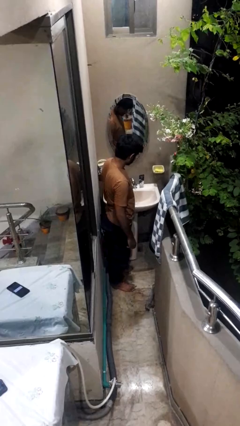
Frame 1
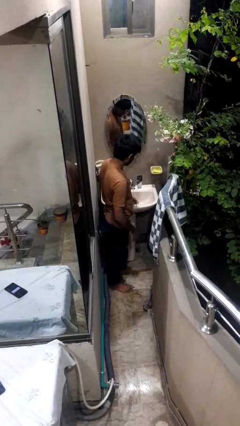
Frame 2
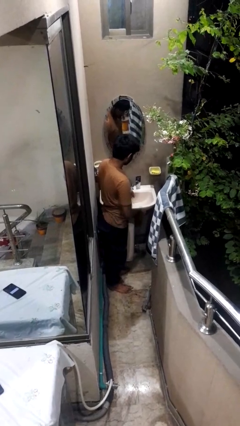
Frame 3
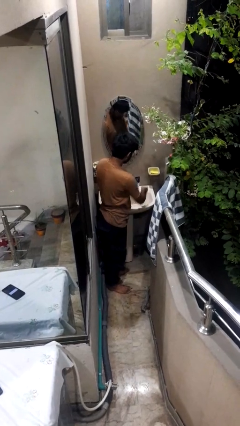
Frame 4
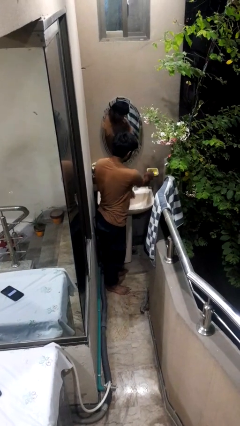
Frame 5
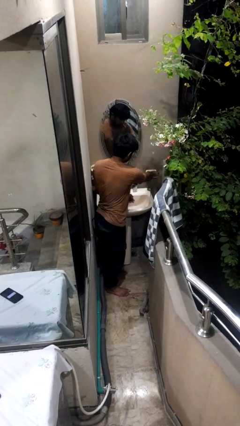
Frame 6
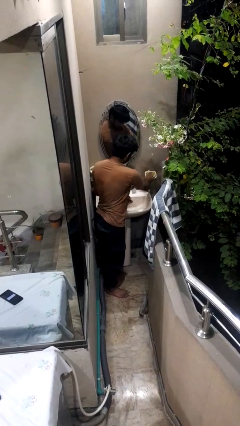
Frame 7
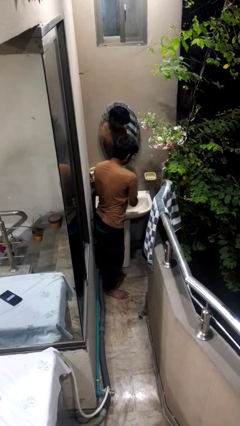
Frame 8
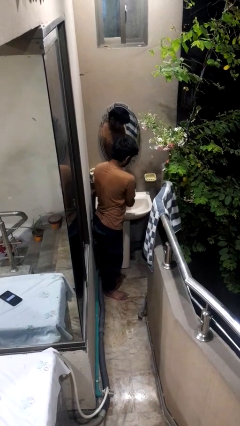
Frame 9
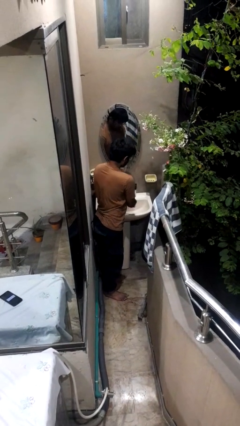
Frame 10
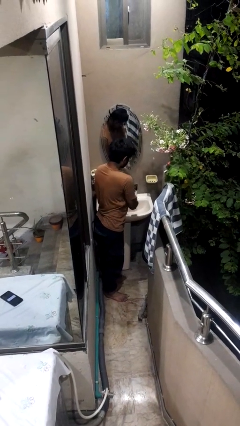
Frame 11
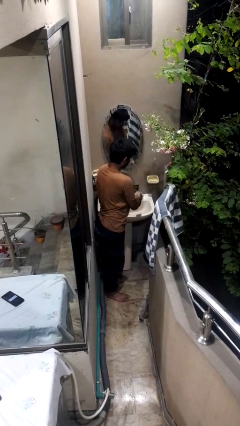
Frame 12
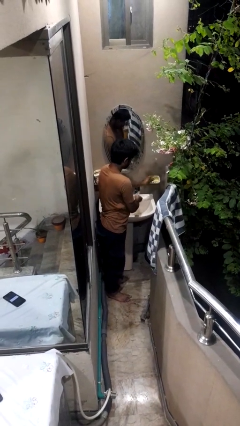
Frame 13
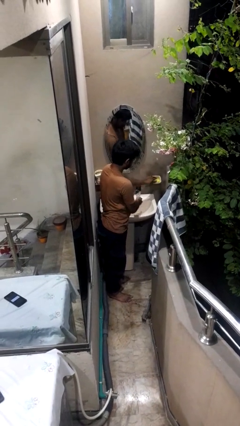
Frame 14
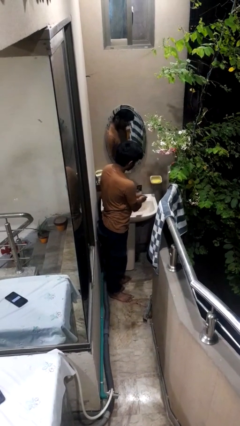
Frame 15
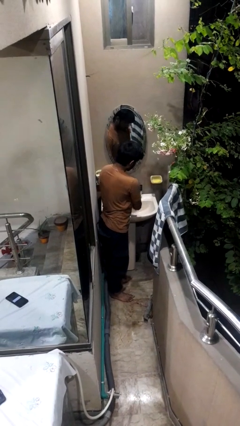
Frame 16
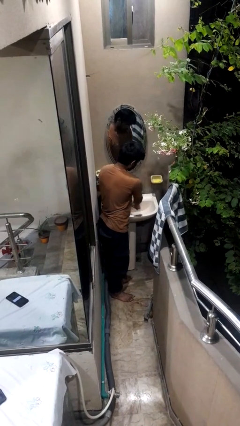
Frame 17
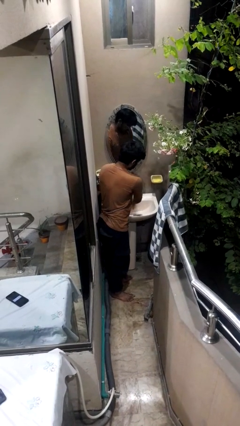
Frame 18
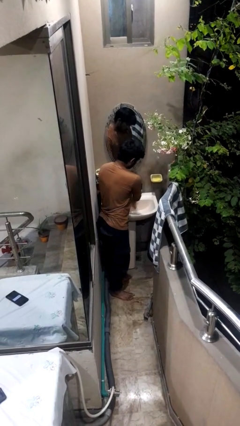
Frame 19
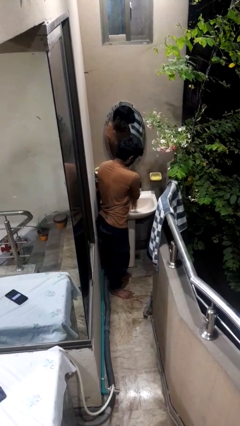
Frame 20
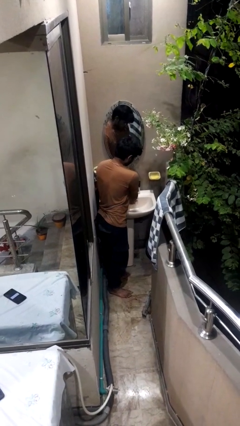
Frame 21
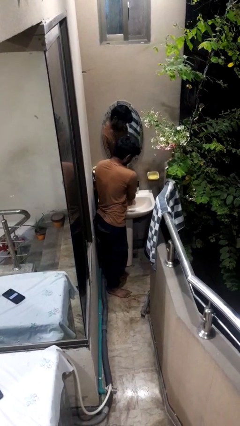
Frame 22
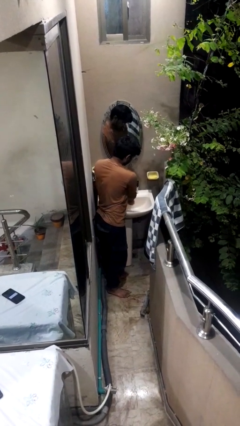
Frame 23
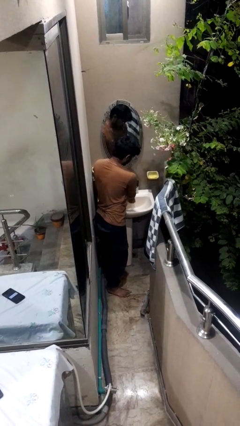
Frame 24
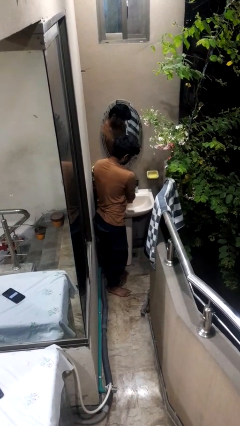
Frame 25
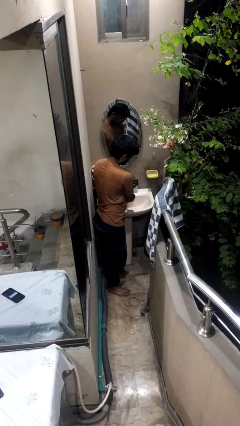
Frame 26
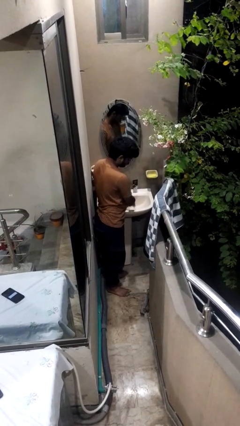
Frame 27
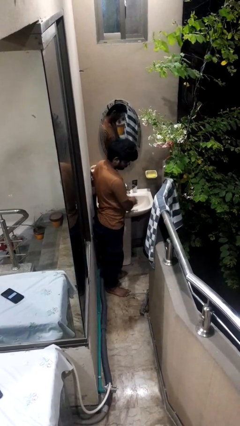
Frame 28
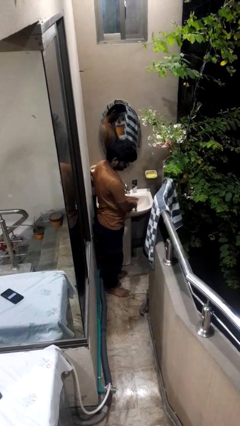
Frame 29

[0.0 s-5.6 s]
person washes hands

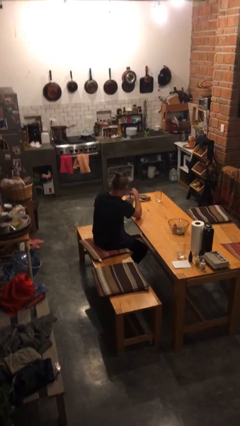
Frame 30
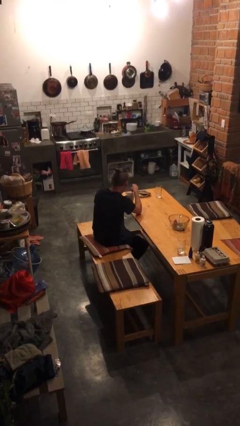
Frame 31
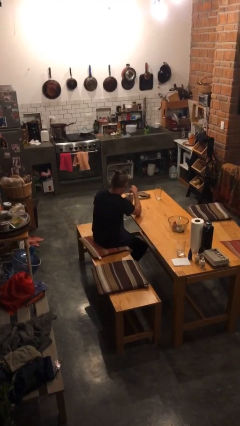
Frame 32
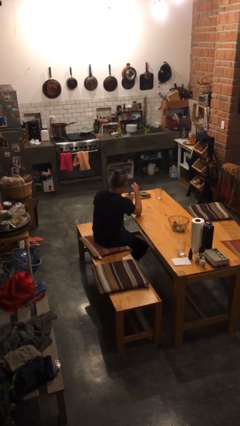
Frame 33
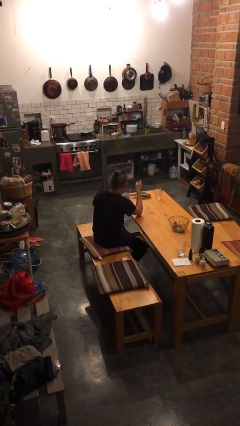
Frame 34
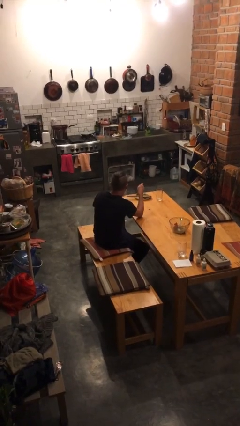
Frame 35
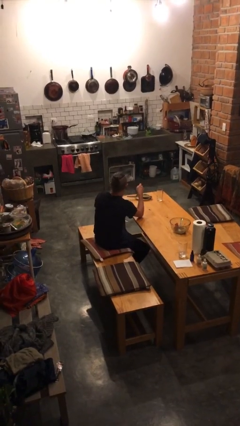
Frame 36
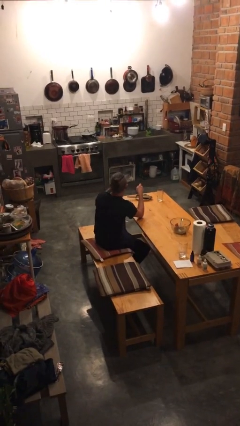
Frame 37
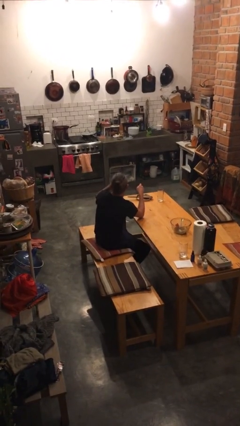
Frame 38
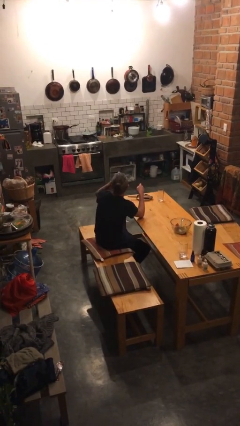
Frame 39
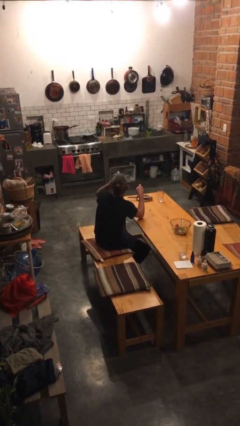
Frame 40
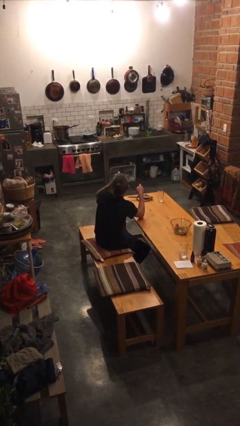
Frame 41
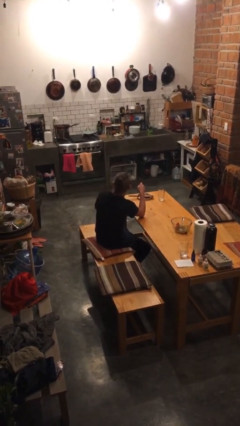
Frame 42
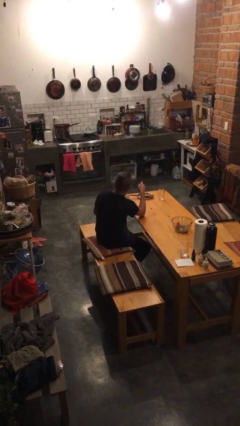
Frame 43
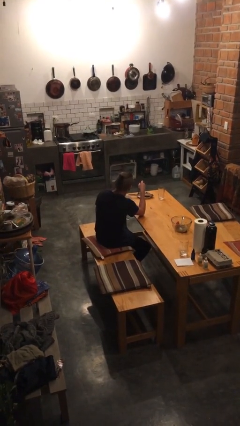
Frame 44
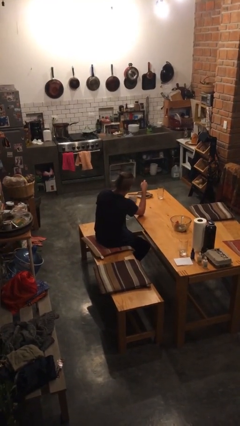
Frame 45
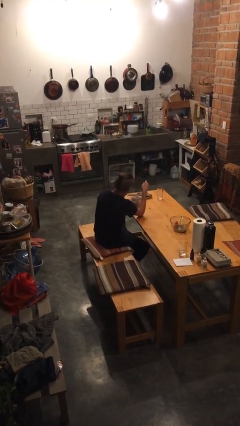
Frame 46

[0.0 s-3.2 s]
person drinks from mug

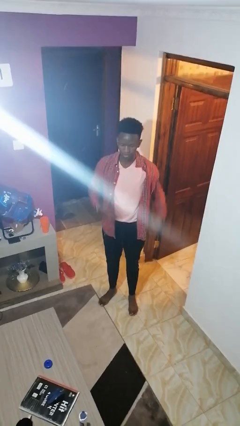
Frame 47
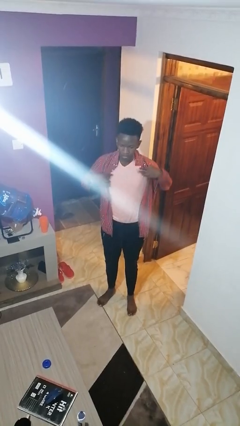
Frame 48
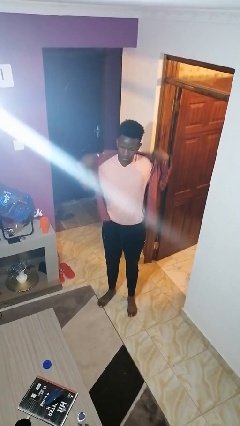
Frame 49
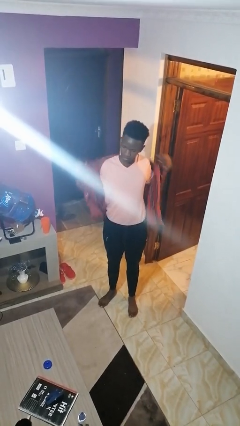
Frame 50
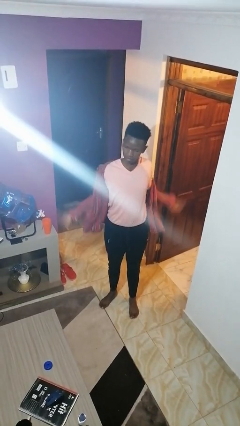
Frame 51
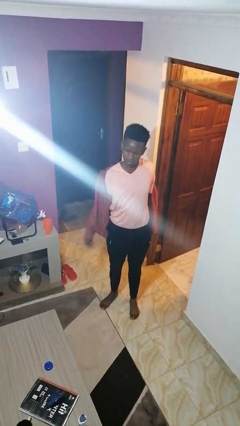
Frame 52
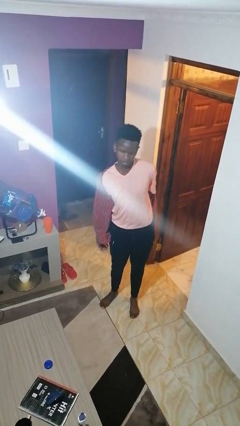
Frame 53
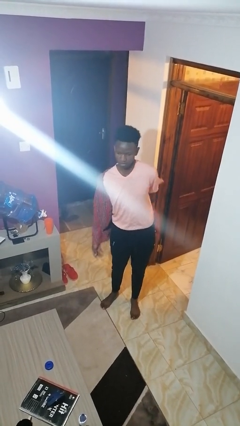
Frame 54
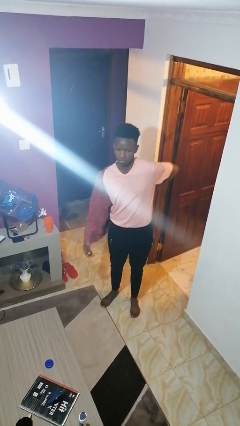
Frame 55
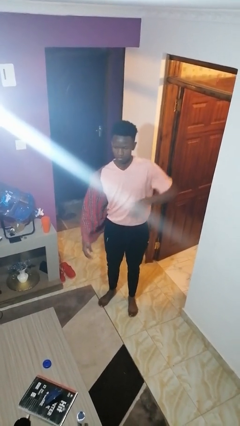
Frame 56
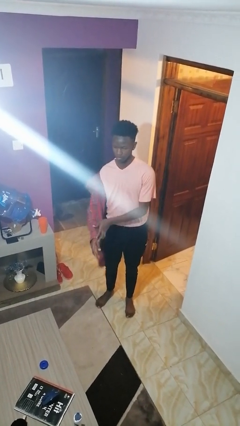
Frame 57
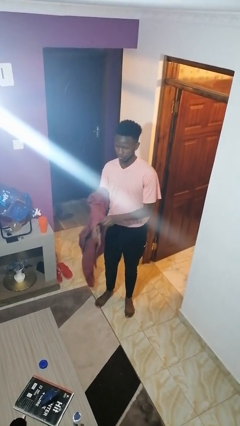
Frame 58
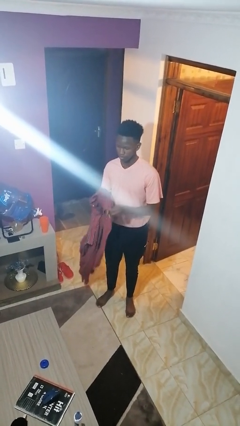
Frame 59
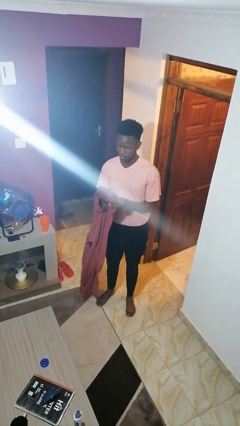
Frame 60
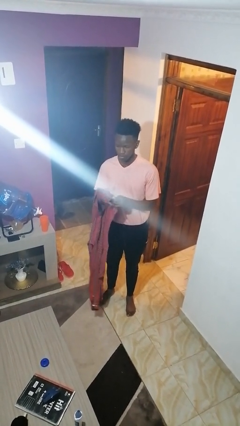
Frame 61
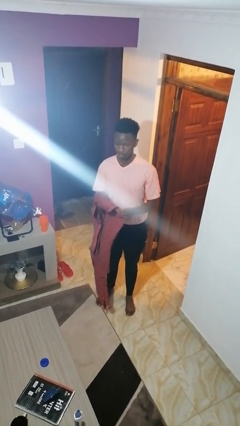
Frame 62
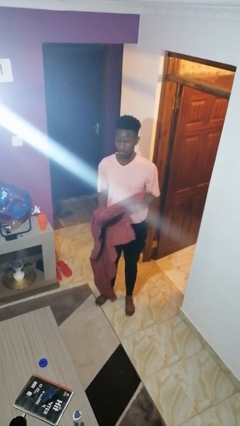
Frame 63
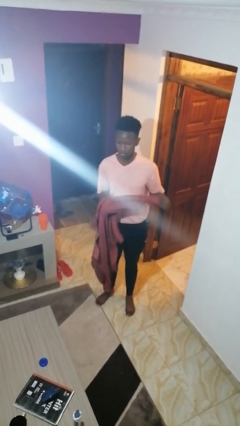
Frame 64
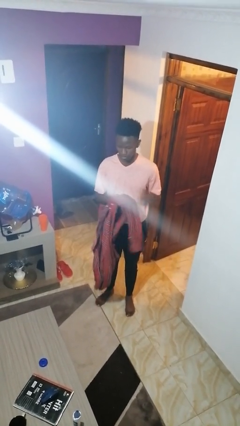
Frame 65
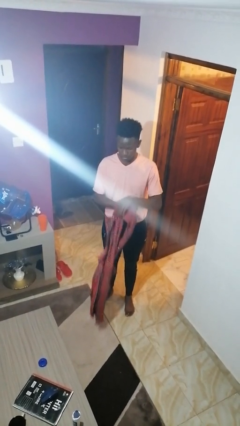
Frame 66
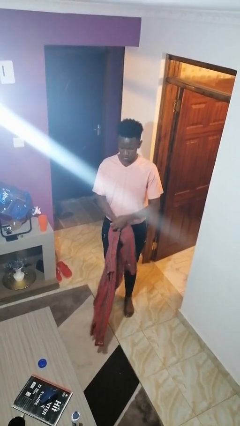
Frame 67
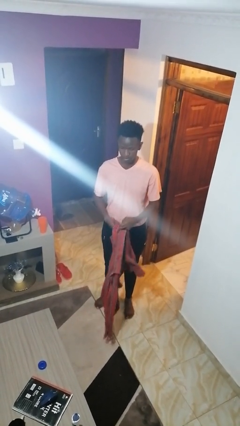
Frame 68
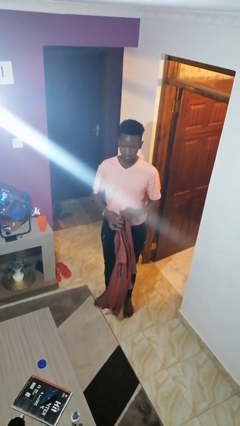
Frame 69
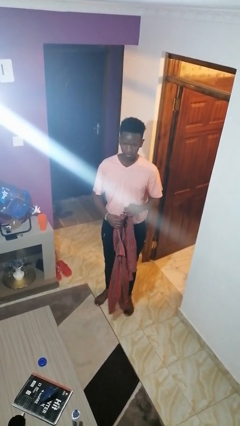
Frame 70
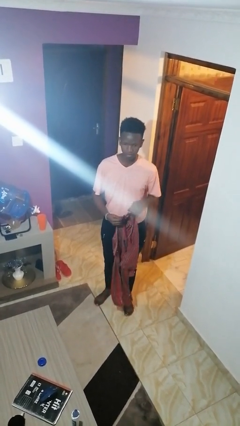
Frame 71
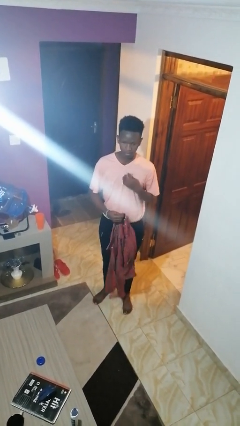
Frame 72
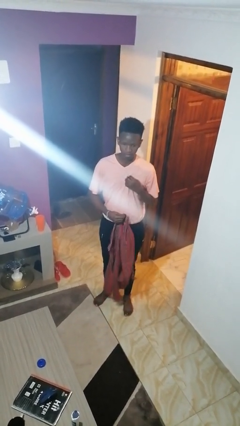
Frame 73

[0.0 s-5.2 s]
person takes off shirt

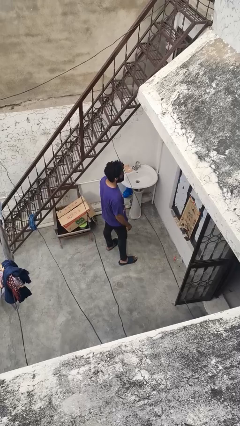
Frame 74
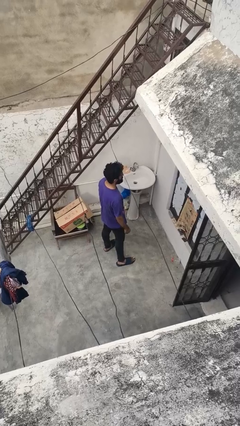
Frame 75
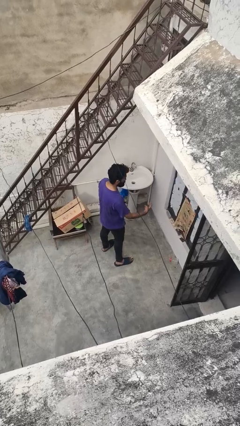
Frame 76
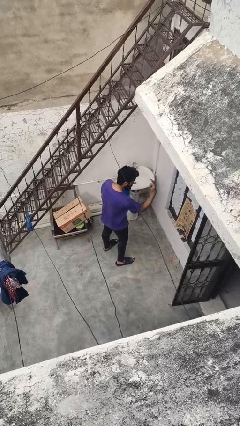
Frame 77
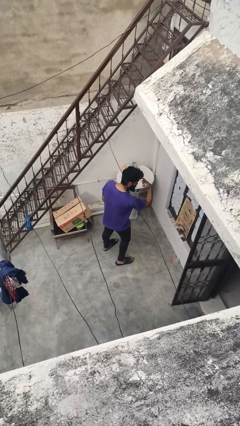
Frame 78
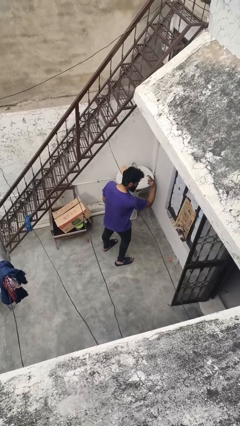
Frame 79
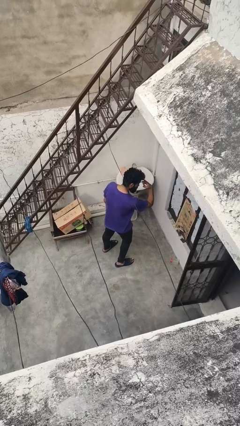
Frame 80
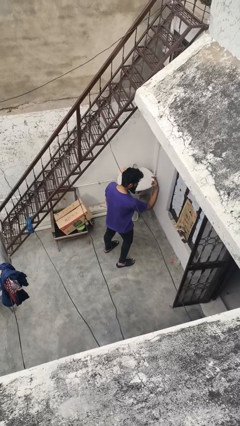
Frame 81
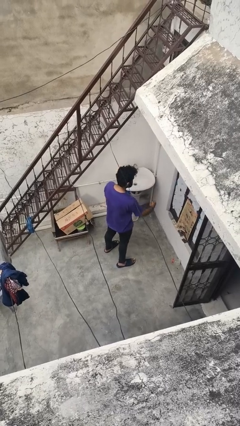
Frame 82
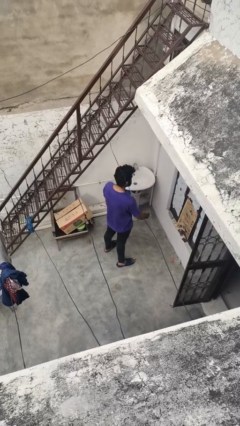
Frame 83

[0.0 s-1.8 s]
person gestures watch closely

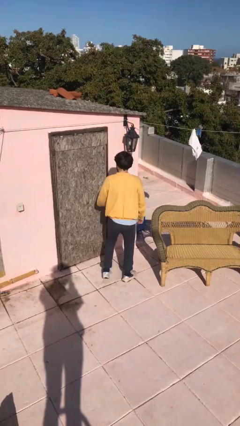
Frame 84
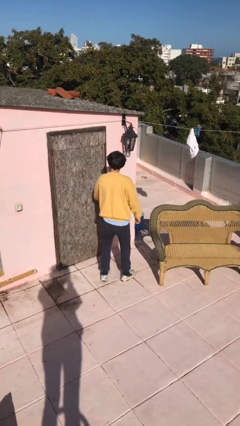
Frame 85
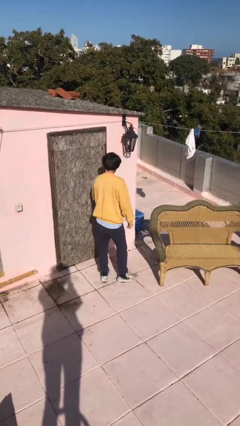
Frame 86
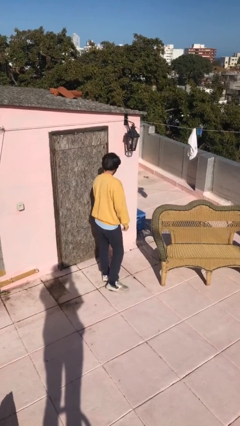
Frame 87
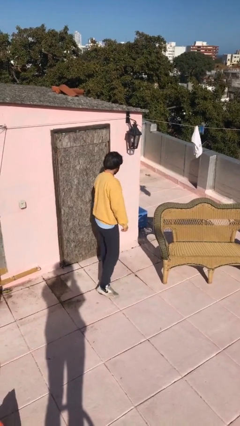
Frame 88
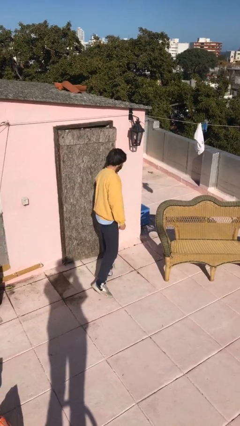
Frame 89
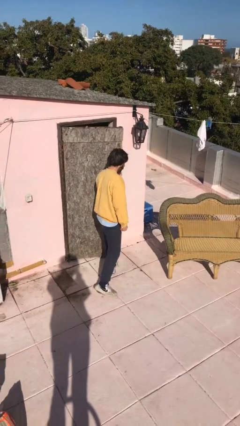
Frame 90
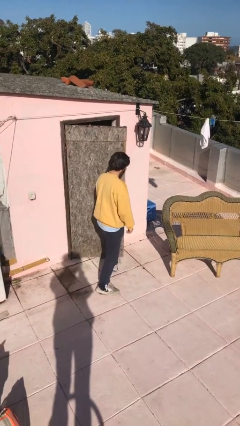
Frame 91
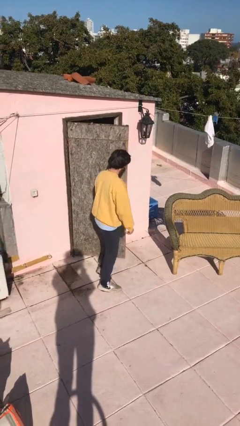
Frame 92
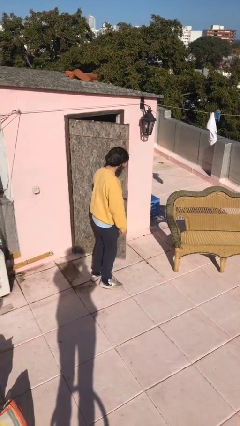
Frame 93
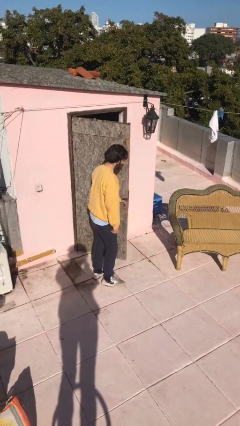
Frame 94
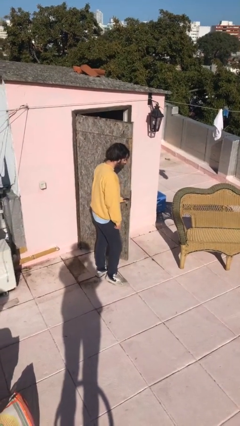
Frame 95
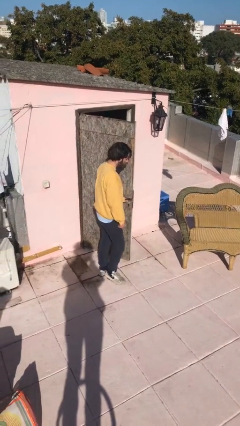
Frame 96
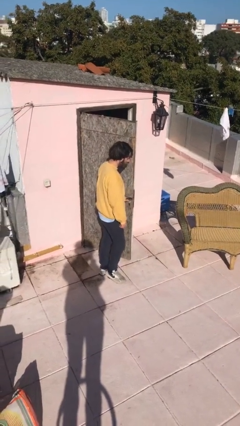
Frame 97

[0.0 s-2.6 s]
person opens facility door
